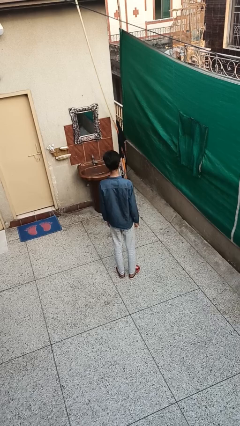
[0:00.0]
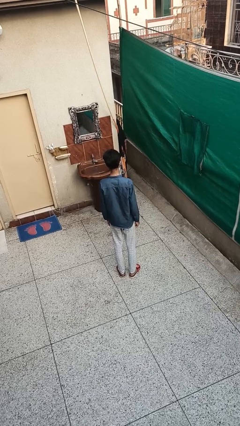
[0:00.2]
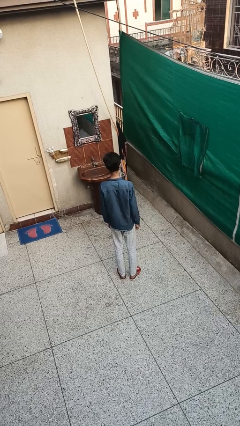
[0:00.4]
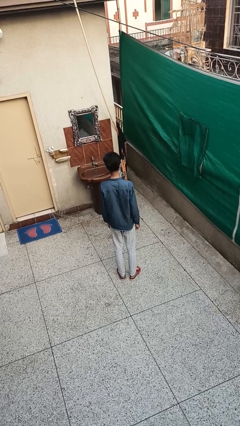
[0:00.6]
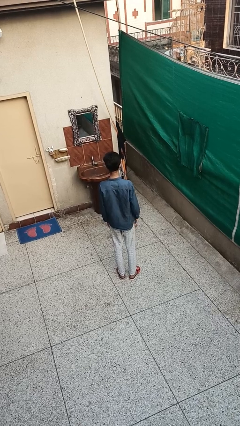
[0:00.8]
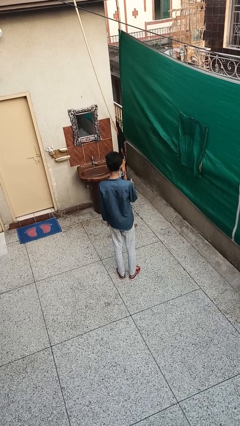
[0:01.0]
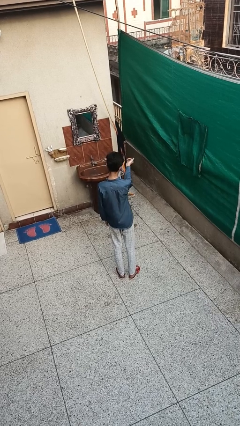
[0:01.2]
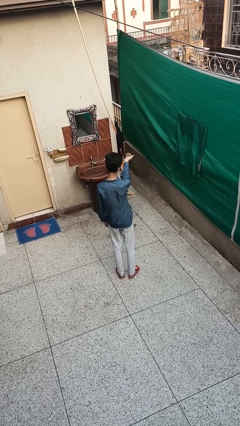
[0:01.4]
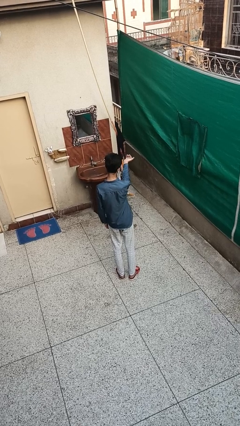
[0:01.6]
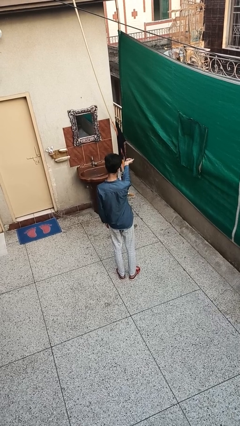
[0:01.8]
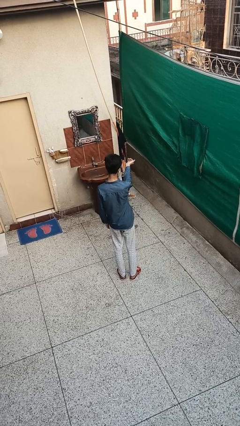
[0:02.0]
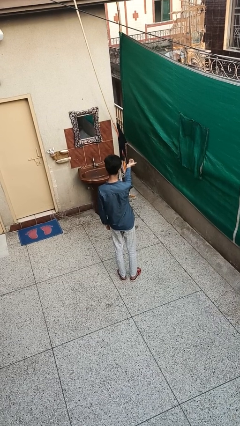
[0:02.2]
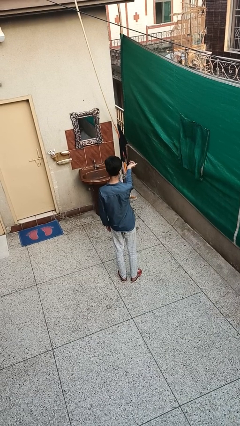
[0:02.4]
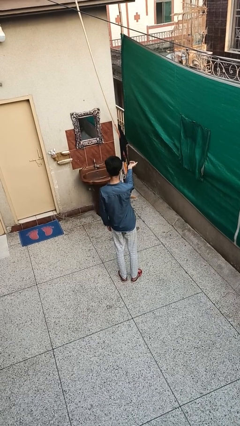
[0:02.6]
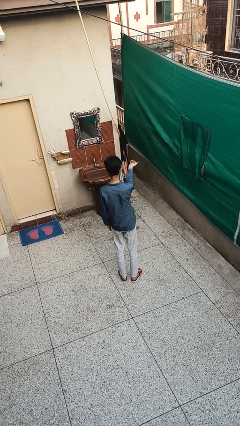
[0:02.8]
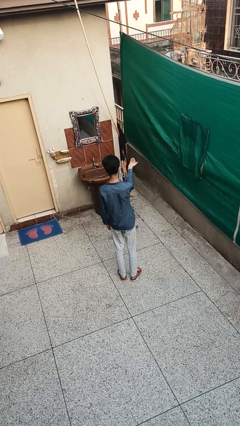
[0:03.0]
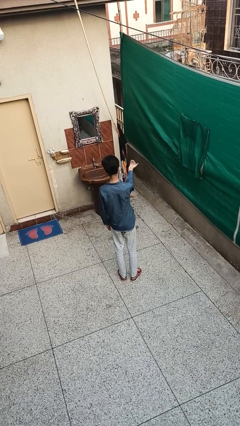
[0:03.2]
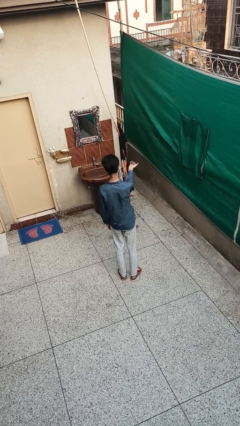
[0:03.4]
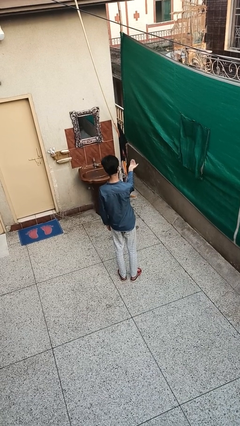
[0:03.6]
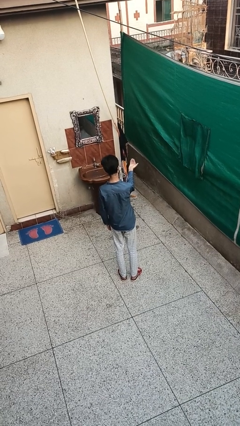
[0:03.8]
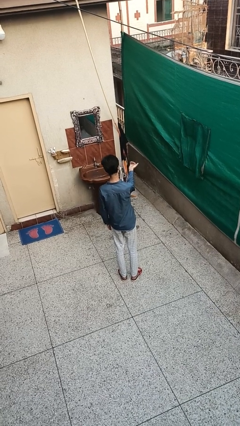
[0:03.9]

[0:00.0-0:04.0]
person gestures come here

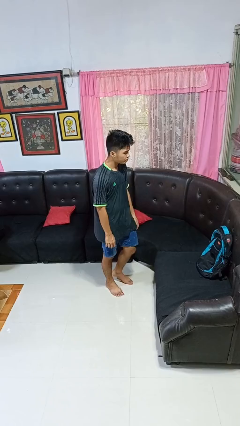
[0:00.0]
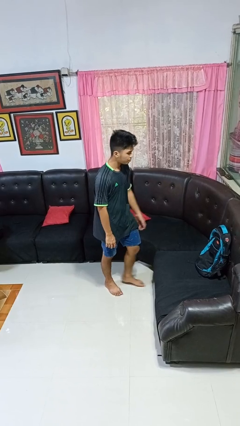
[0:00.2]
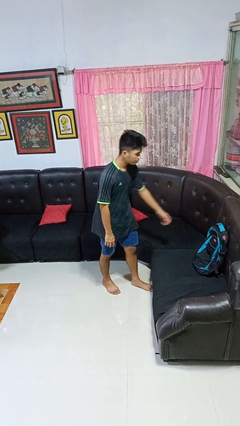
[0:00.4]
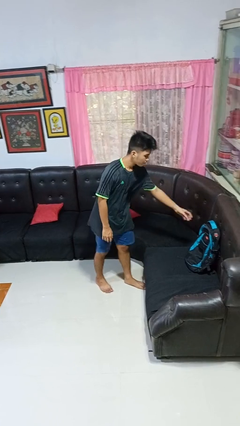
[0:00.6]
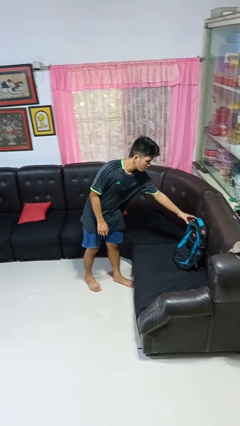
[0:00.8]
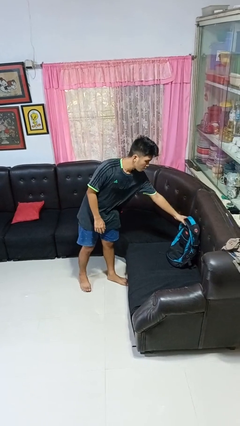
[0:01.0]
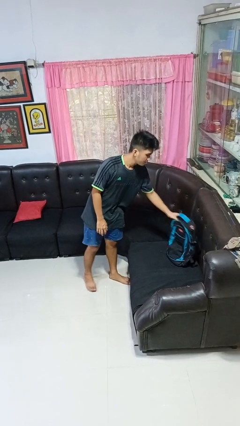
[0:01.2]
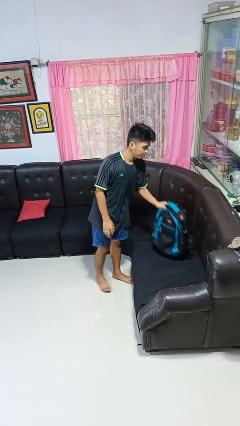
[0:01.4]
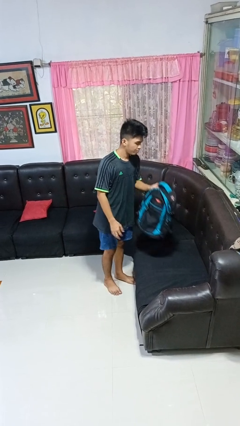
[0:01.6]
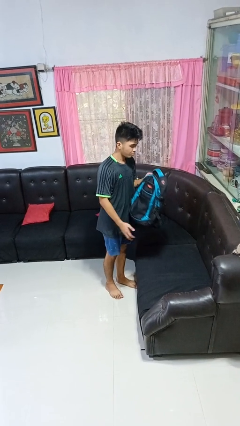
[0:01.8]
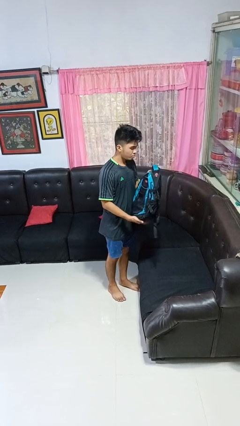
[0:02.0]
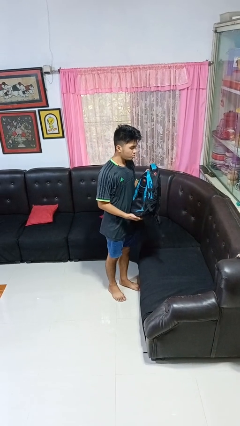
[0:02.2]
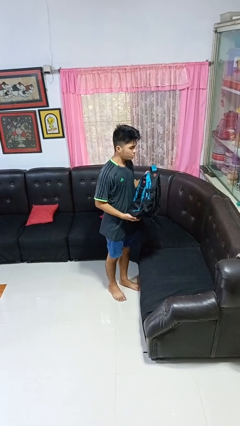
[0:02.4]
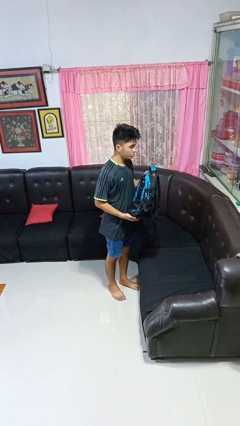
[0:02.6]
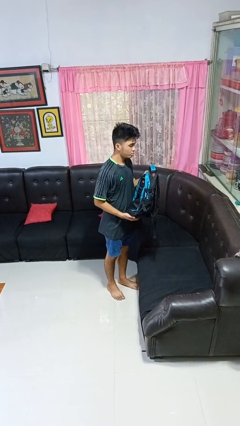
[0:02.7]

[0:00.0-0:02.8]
person picks up object from couch

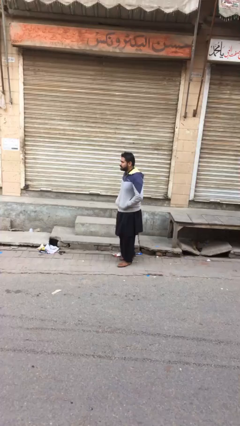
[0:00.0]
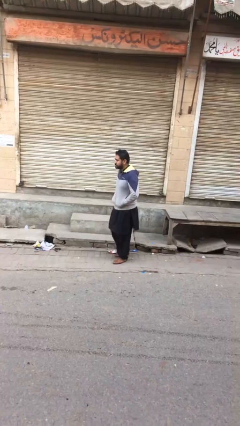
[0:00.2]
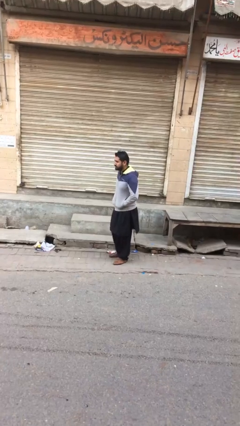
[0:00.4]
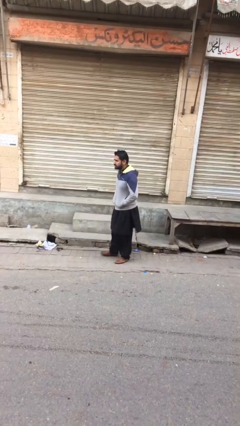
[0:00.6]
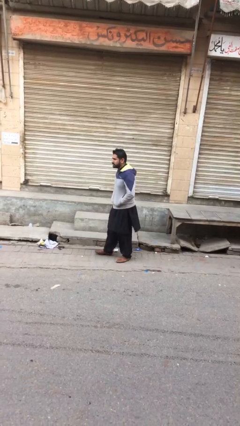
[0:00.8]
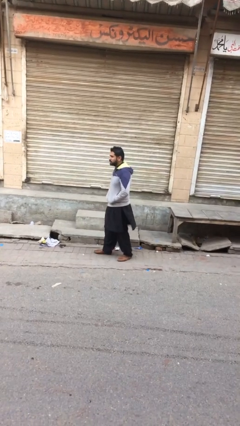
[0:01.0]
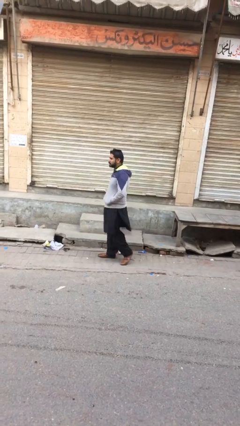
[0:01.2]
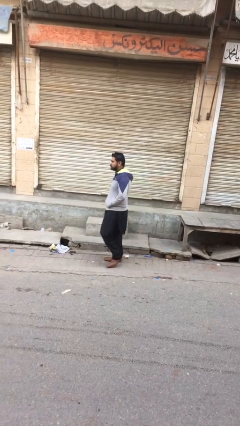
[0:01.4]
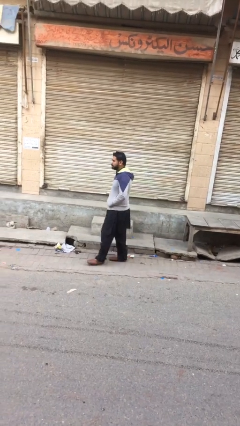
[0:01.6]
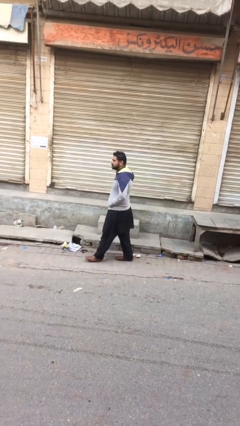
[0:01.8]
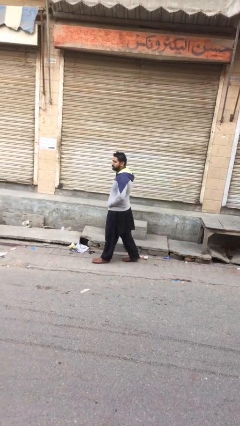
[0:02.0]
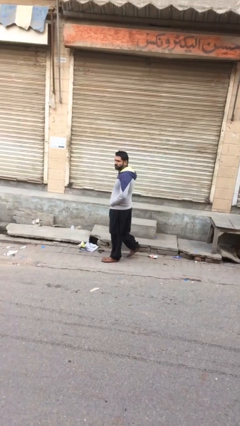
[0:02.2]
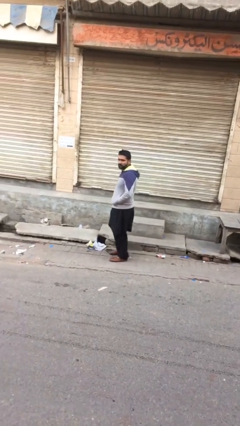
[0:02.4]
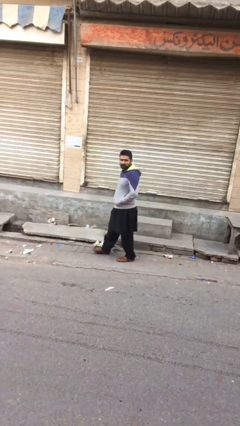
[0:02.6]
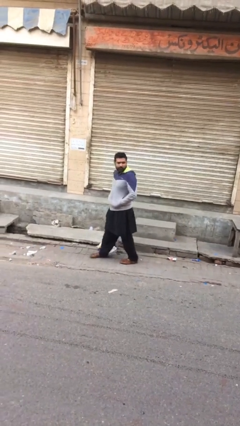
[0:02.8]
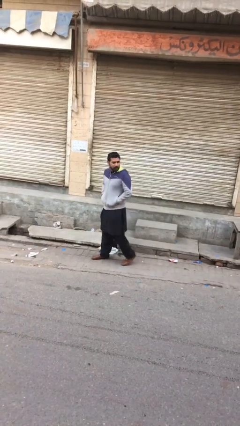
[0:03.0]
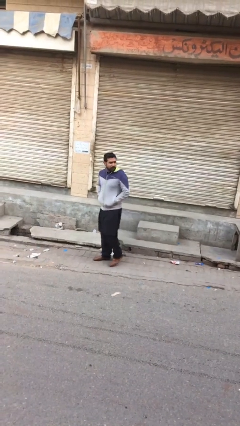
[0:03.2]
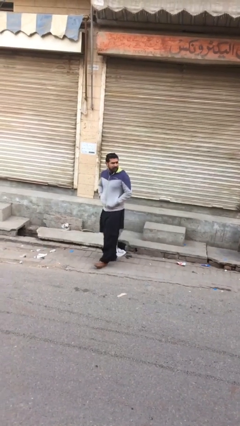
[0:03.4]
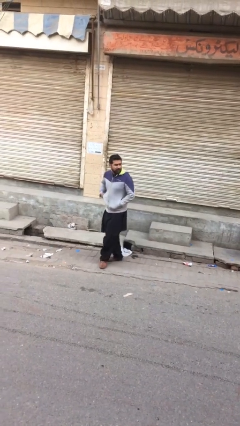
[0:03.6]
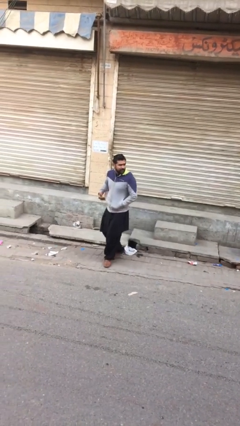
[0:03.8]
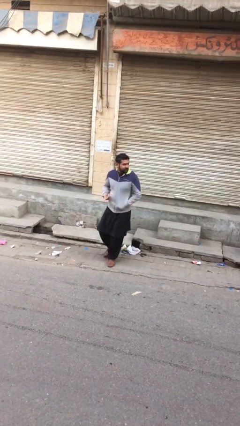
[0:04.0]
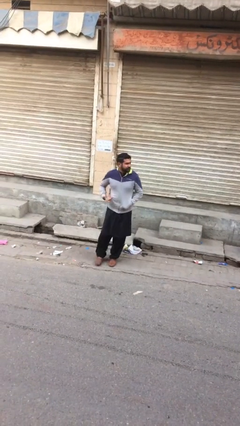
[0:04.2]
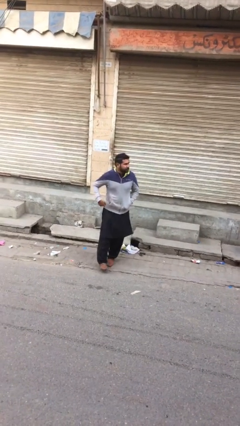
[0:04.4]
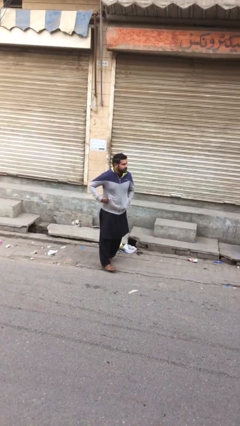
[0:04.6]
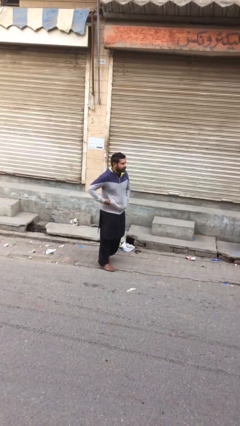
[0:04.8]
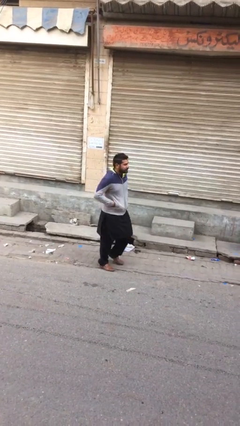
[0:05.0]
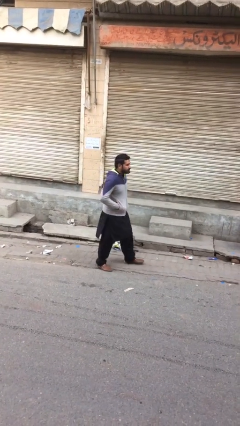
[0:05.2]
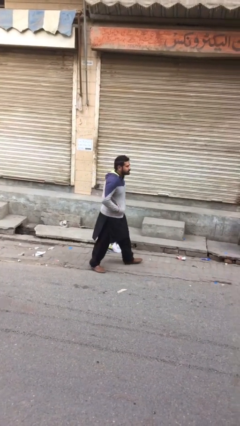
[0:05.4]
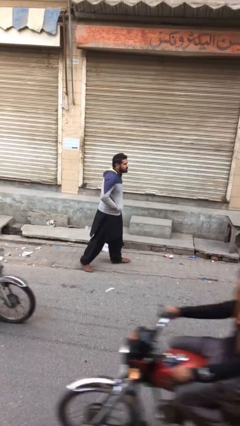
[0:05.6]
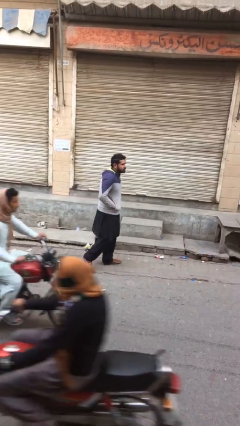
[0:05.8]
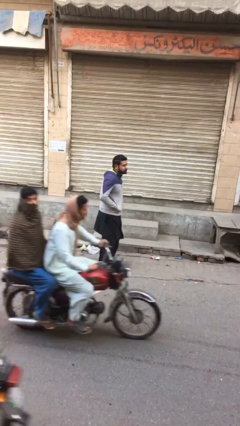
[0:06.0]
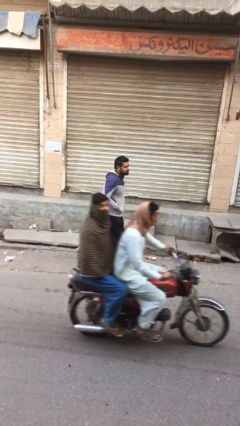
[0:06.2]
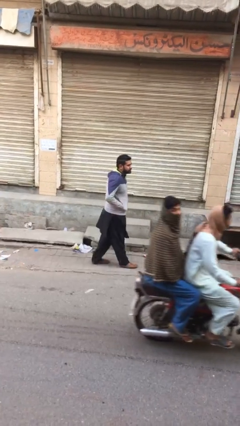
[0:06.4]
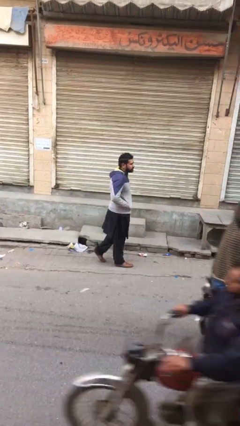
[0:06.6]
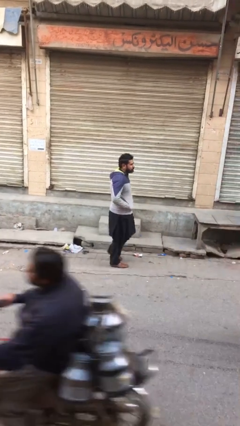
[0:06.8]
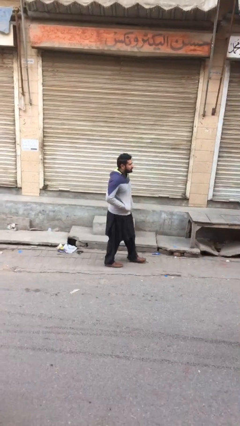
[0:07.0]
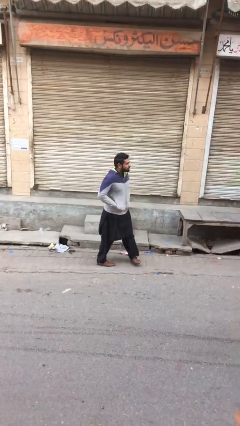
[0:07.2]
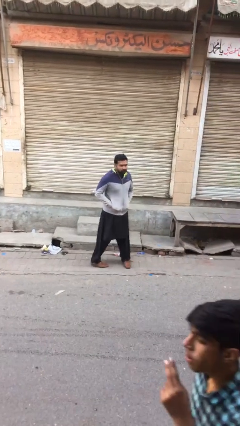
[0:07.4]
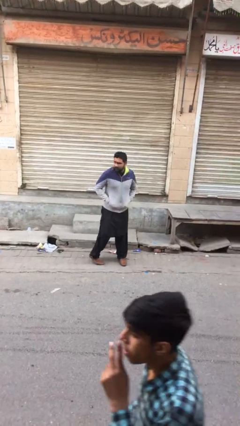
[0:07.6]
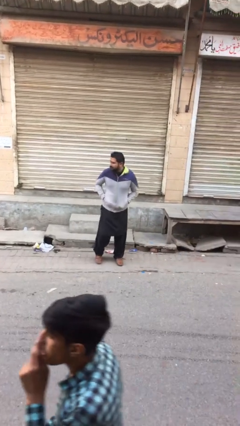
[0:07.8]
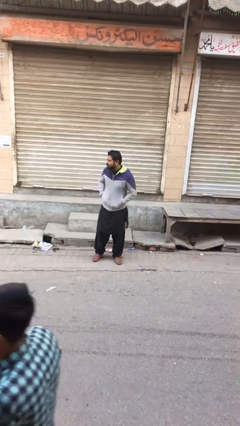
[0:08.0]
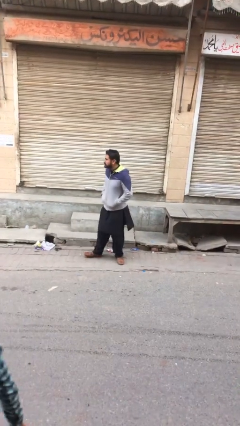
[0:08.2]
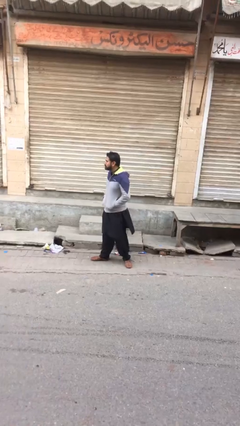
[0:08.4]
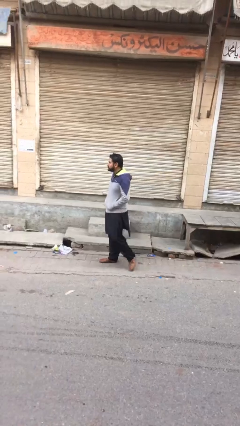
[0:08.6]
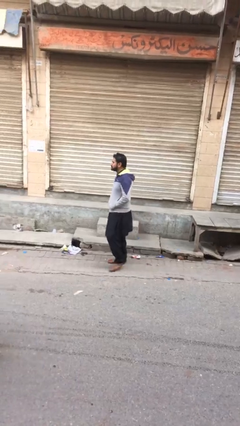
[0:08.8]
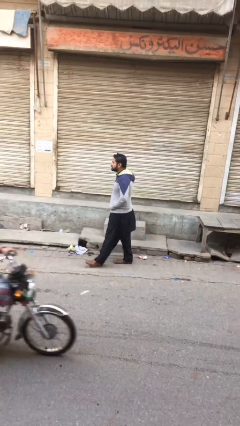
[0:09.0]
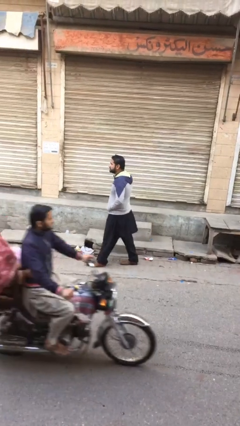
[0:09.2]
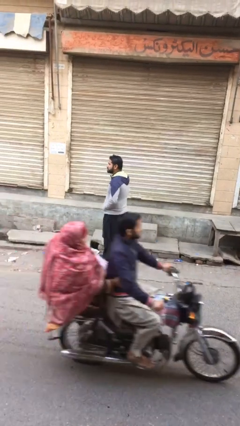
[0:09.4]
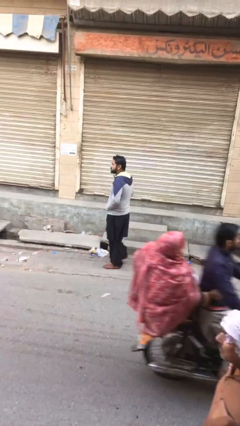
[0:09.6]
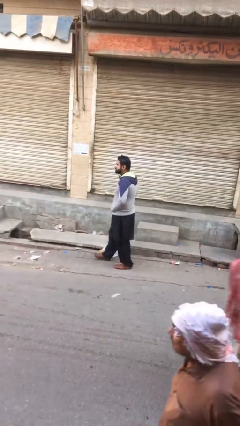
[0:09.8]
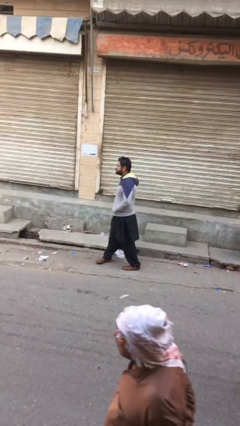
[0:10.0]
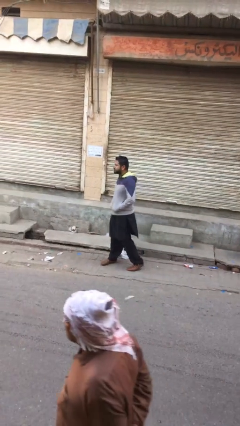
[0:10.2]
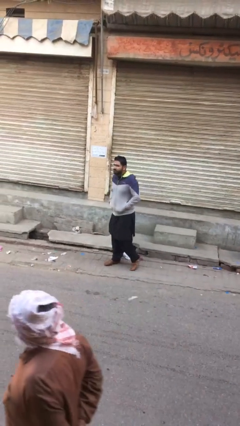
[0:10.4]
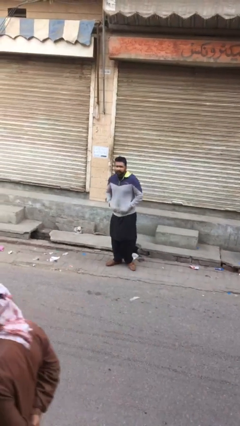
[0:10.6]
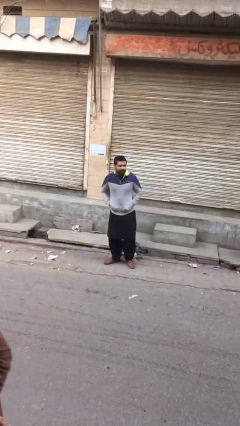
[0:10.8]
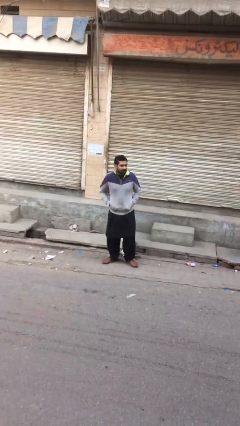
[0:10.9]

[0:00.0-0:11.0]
person walks
